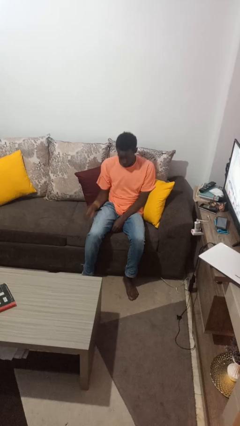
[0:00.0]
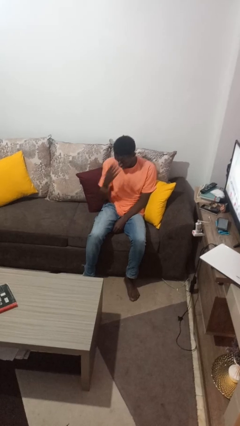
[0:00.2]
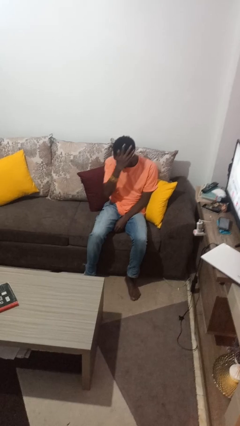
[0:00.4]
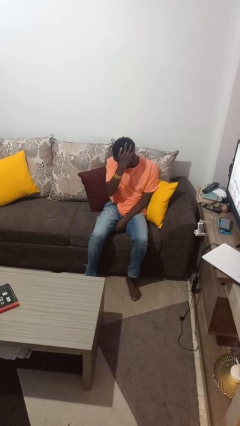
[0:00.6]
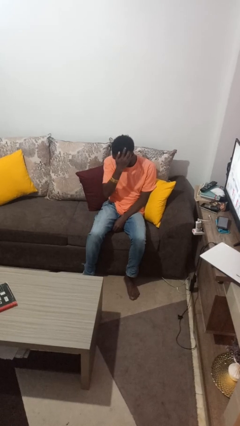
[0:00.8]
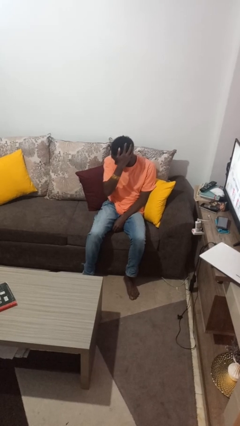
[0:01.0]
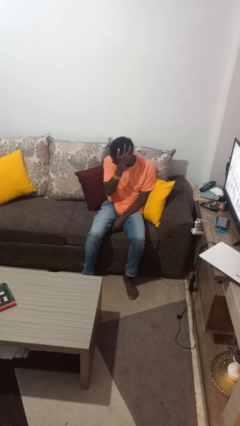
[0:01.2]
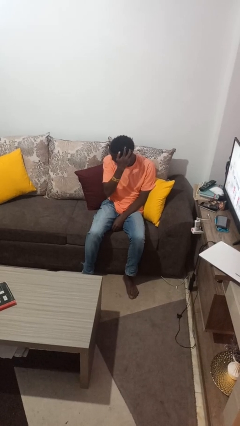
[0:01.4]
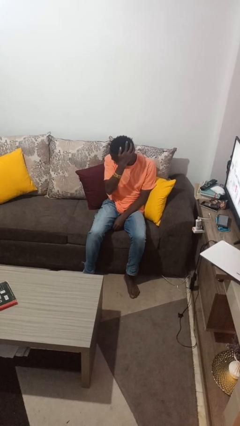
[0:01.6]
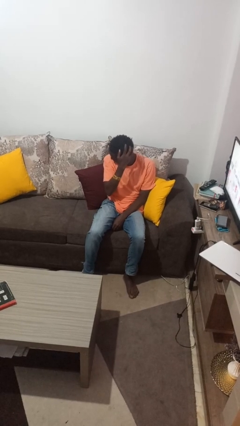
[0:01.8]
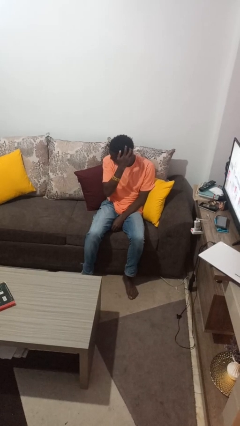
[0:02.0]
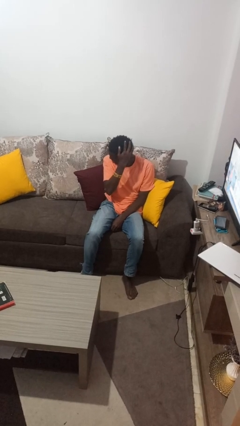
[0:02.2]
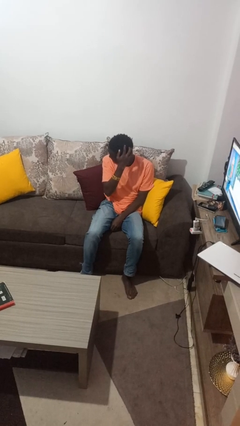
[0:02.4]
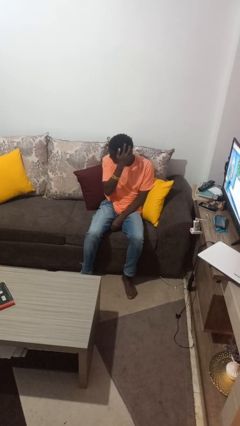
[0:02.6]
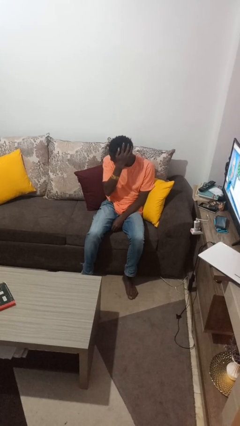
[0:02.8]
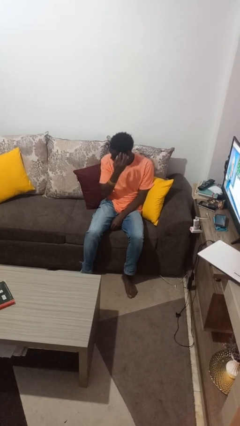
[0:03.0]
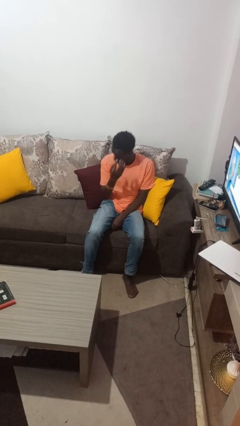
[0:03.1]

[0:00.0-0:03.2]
person strokes hair

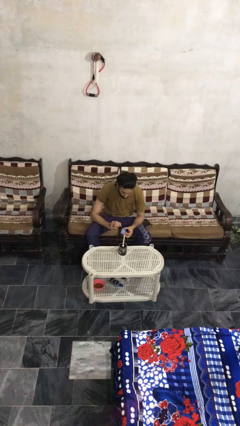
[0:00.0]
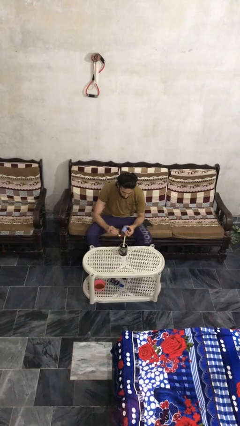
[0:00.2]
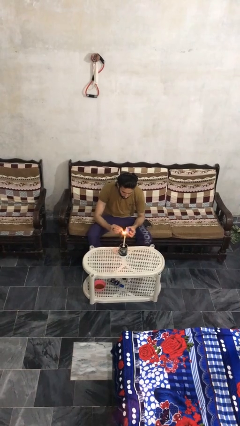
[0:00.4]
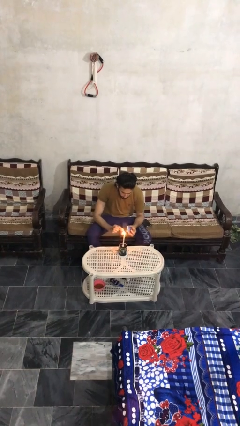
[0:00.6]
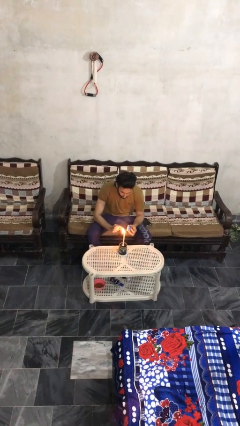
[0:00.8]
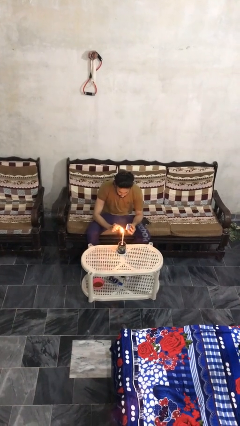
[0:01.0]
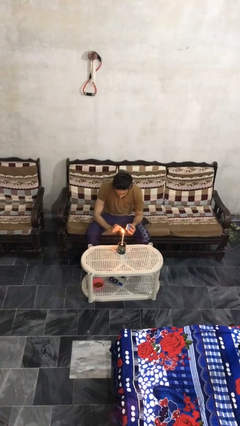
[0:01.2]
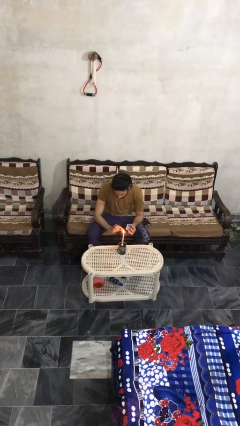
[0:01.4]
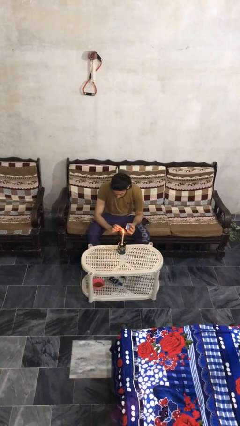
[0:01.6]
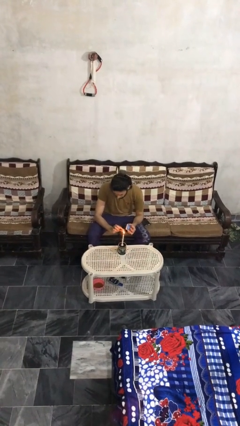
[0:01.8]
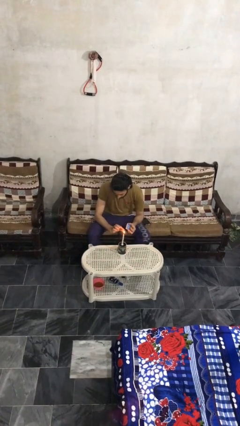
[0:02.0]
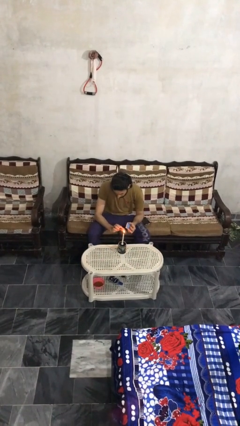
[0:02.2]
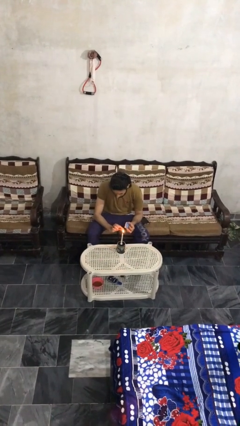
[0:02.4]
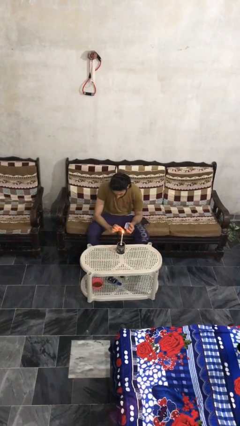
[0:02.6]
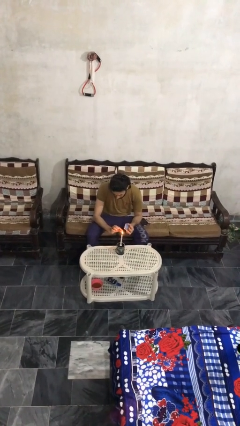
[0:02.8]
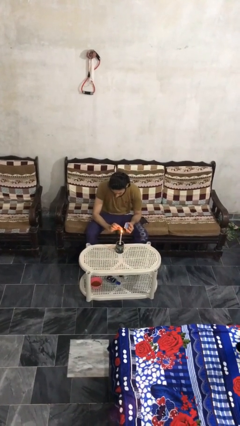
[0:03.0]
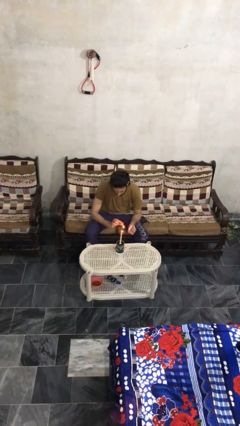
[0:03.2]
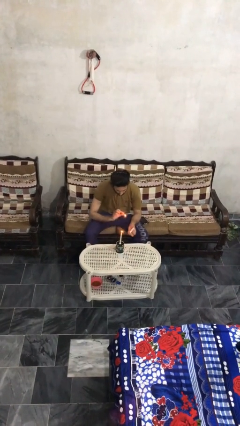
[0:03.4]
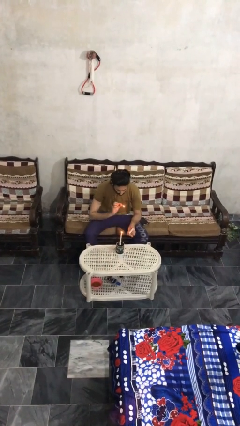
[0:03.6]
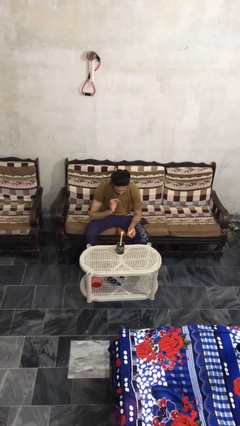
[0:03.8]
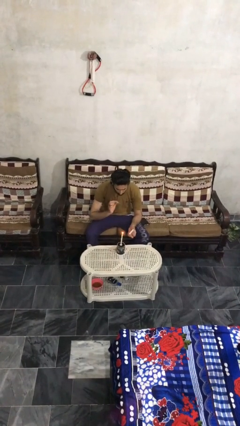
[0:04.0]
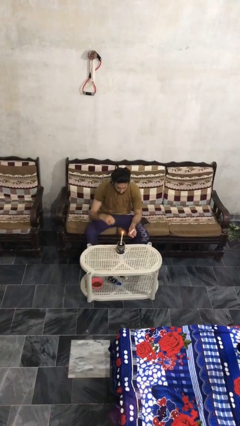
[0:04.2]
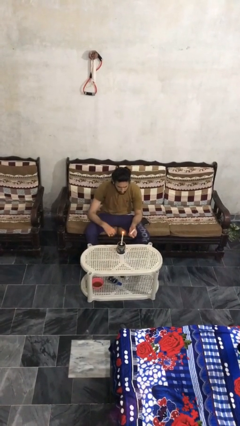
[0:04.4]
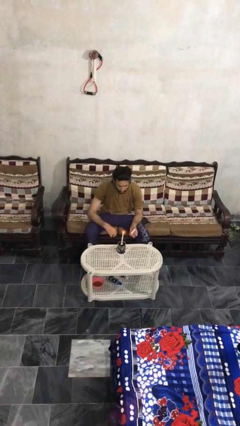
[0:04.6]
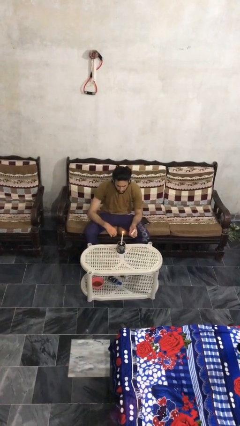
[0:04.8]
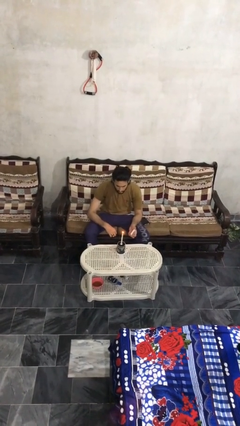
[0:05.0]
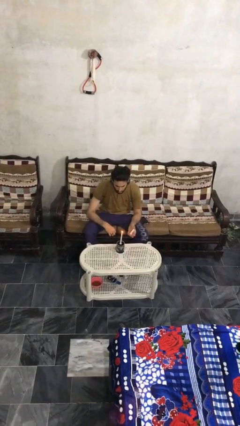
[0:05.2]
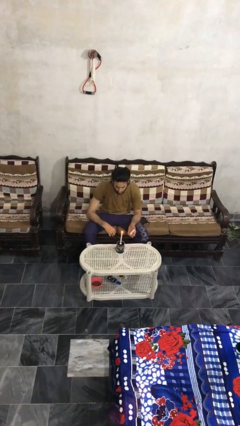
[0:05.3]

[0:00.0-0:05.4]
person lights candle

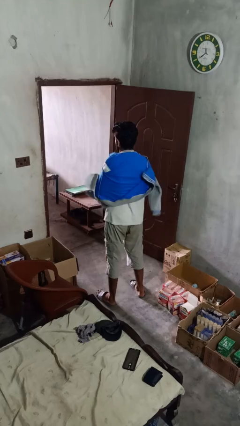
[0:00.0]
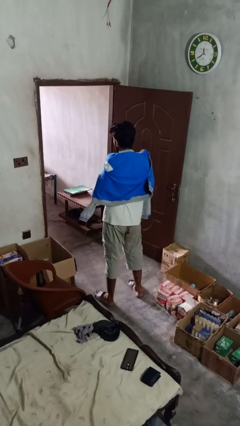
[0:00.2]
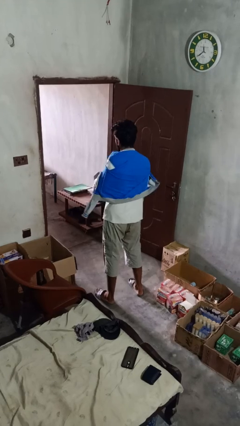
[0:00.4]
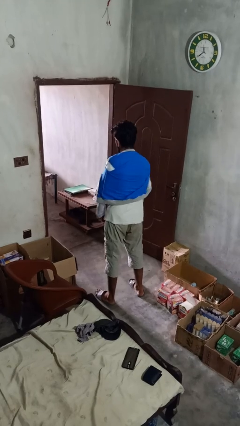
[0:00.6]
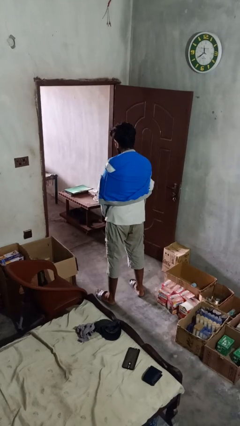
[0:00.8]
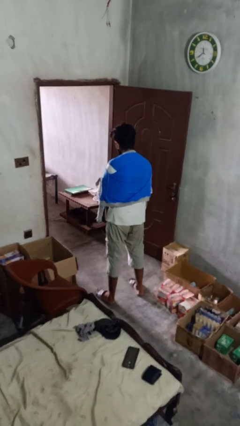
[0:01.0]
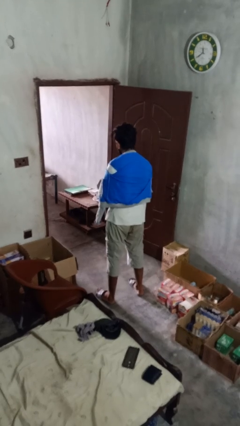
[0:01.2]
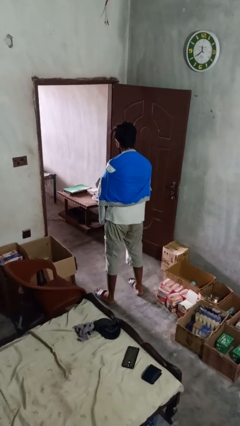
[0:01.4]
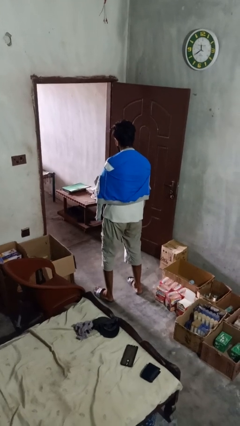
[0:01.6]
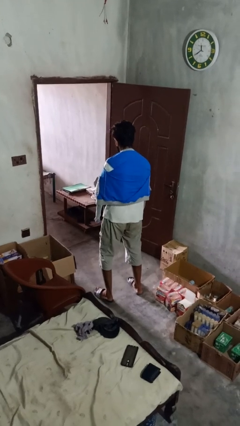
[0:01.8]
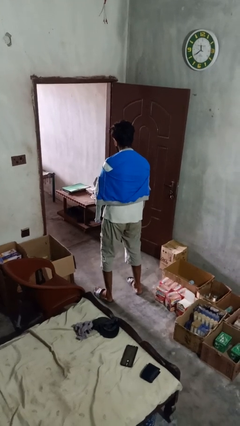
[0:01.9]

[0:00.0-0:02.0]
person zips up jacket

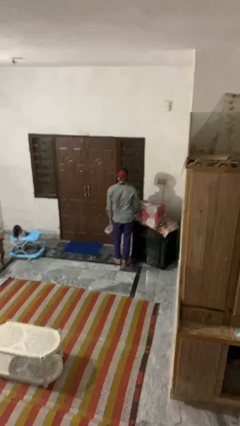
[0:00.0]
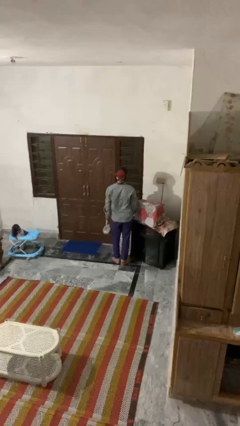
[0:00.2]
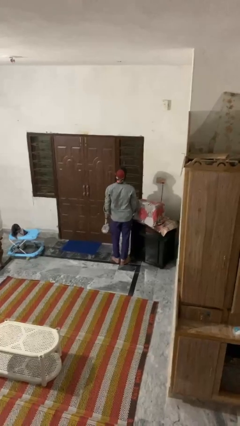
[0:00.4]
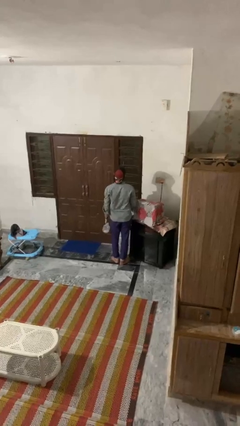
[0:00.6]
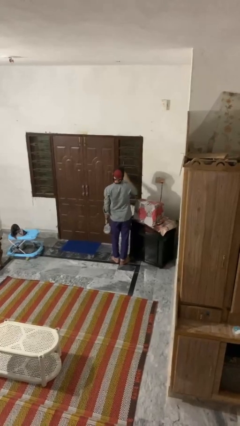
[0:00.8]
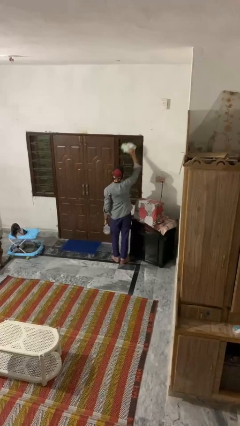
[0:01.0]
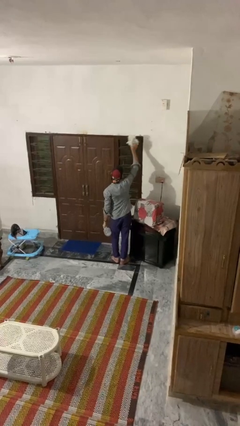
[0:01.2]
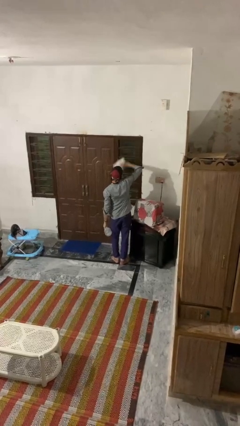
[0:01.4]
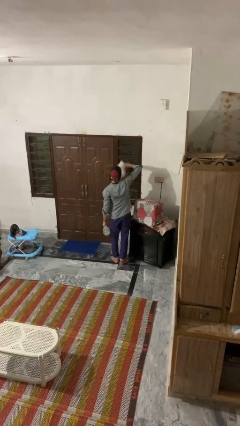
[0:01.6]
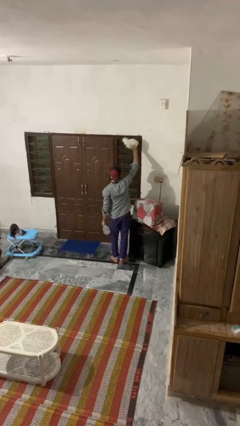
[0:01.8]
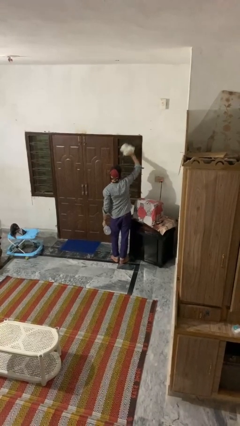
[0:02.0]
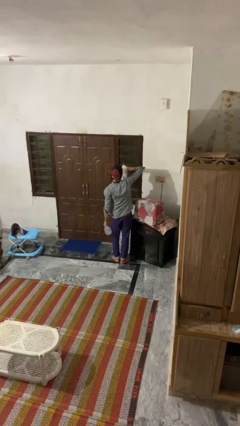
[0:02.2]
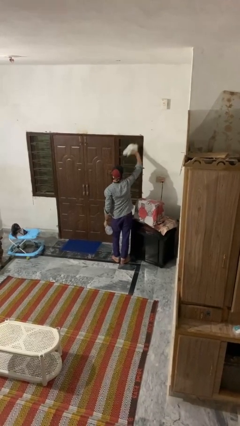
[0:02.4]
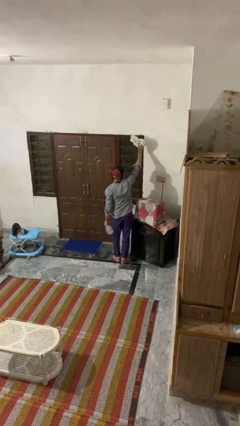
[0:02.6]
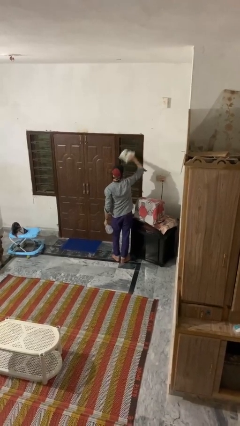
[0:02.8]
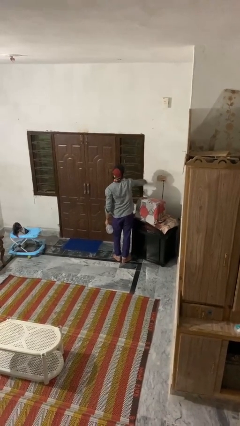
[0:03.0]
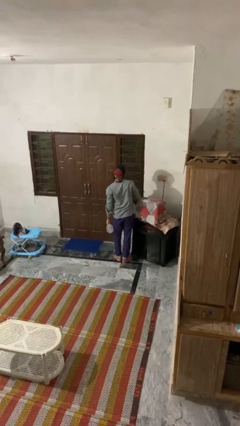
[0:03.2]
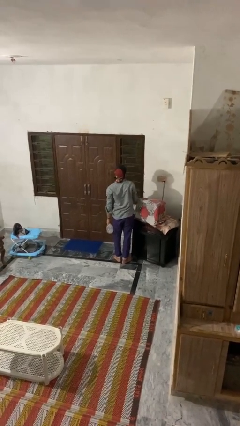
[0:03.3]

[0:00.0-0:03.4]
person washes window

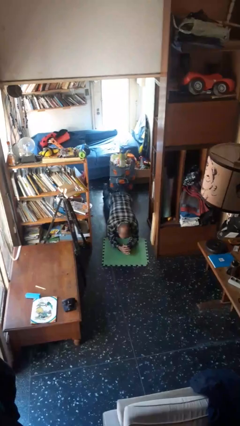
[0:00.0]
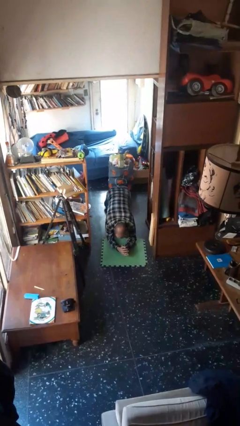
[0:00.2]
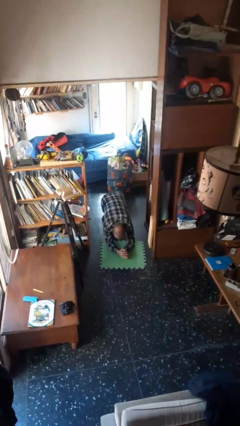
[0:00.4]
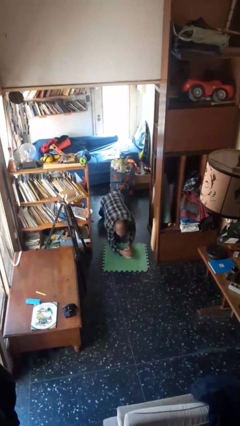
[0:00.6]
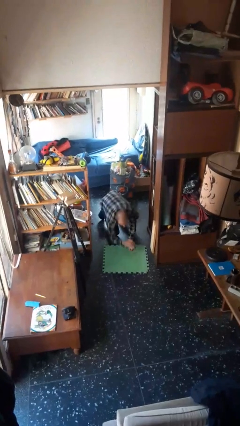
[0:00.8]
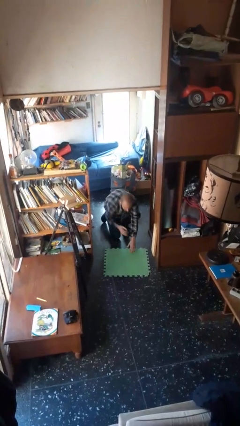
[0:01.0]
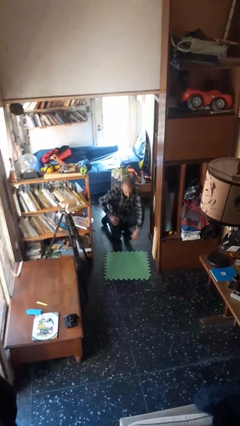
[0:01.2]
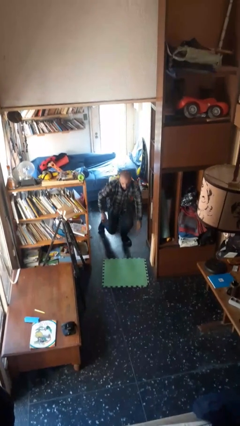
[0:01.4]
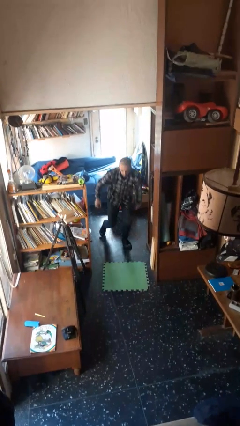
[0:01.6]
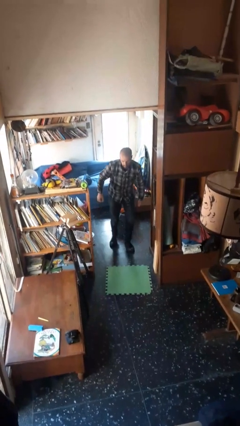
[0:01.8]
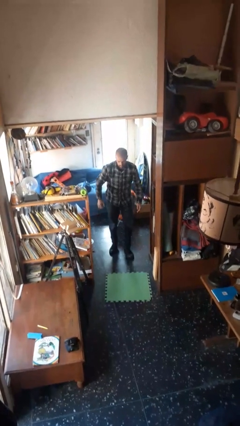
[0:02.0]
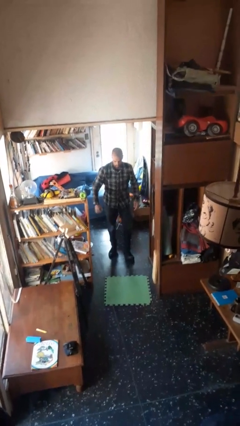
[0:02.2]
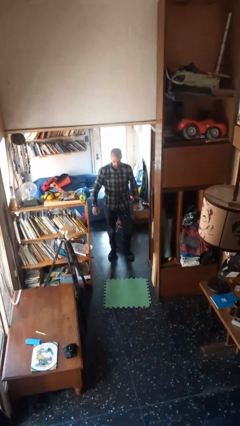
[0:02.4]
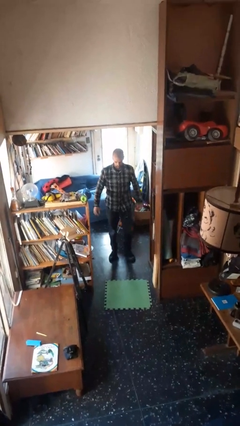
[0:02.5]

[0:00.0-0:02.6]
person stands up from floor

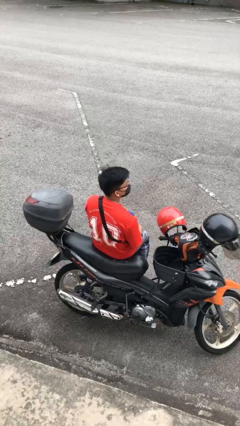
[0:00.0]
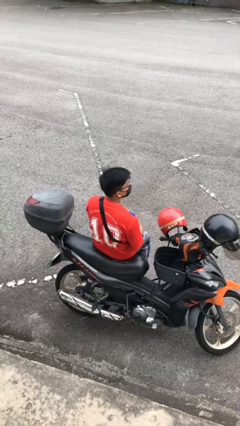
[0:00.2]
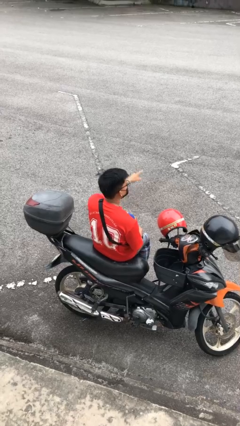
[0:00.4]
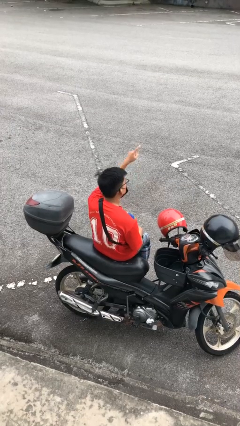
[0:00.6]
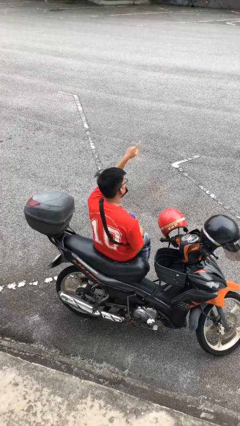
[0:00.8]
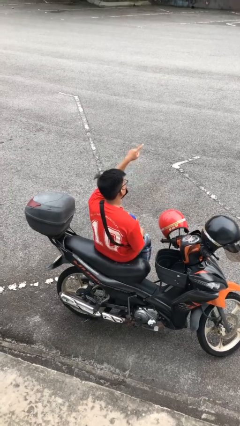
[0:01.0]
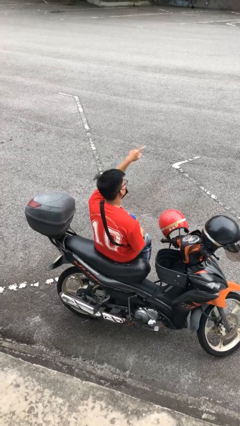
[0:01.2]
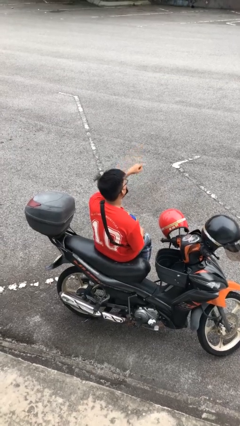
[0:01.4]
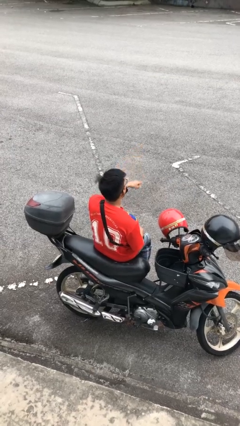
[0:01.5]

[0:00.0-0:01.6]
person points at person
